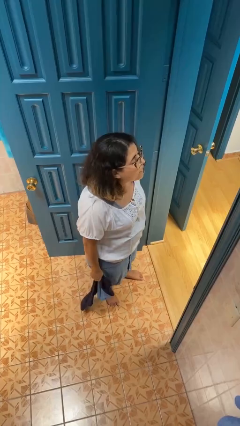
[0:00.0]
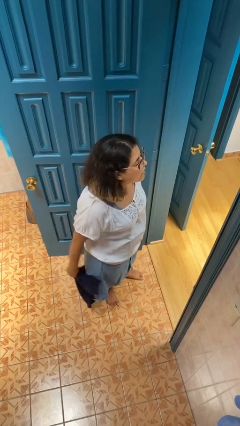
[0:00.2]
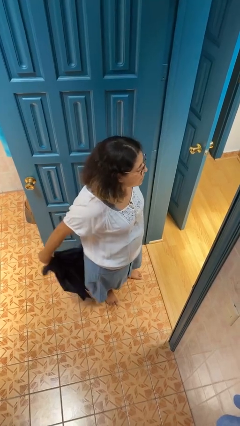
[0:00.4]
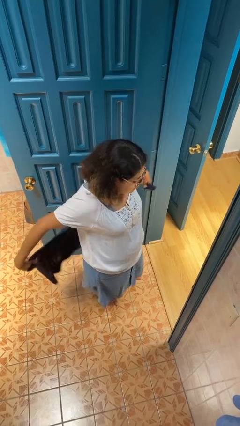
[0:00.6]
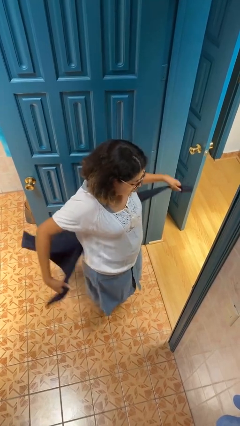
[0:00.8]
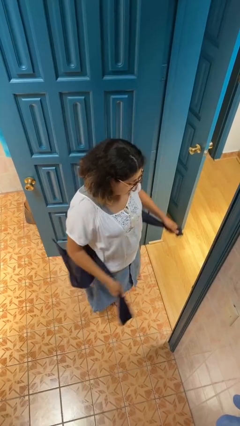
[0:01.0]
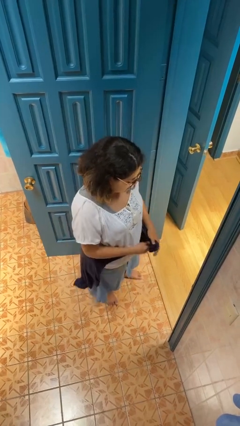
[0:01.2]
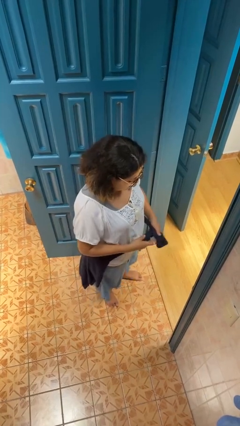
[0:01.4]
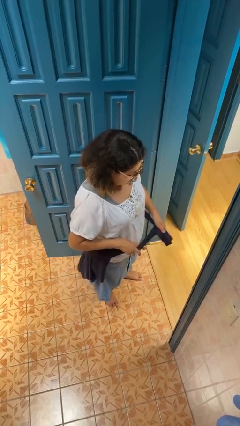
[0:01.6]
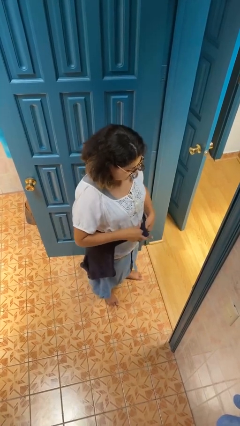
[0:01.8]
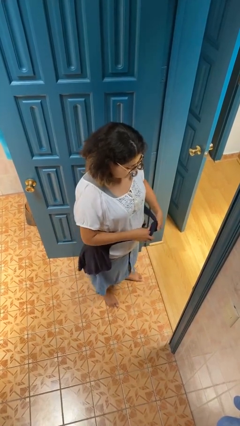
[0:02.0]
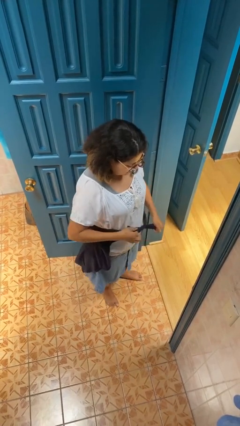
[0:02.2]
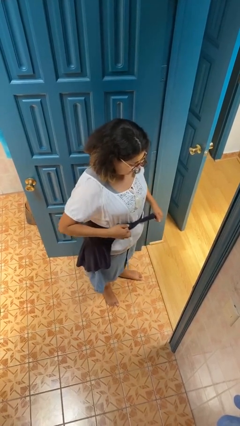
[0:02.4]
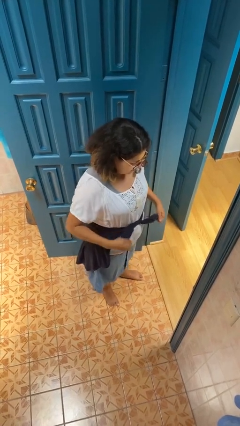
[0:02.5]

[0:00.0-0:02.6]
person ties jacket around waist

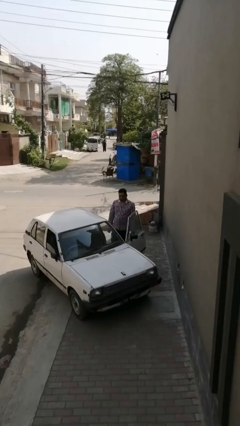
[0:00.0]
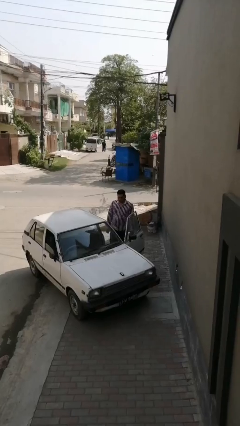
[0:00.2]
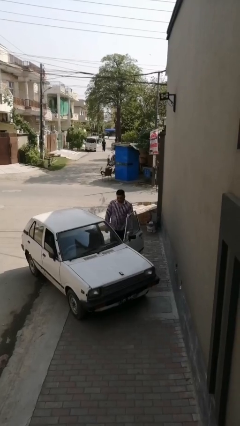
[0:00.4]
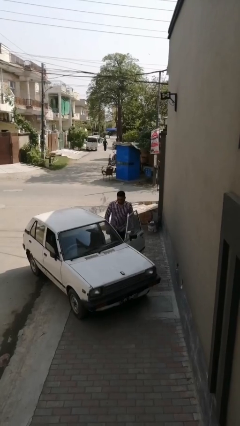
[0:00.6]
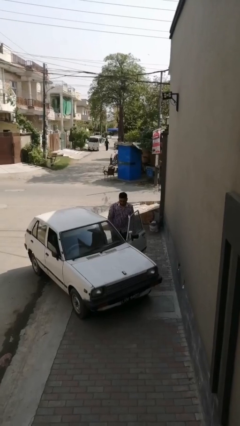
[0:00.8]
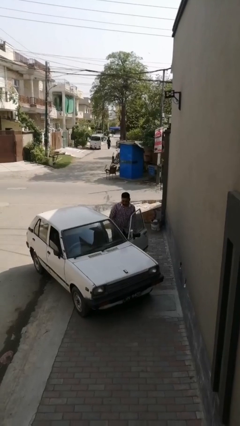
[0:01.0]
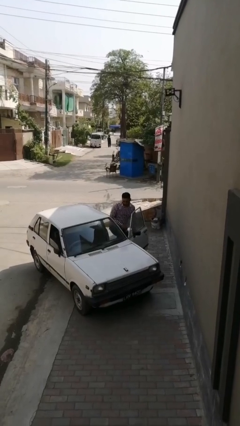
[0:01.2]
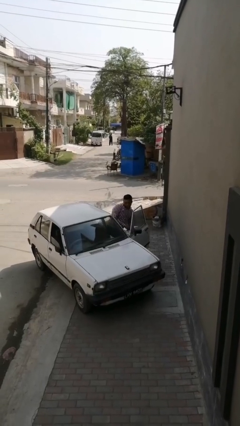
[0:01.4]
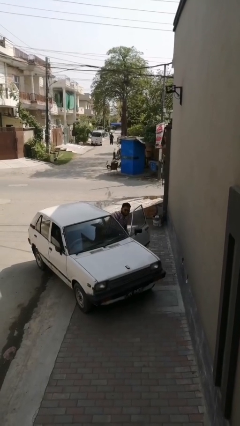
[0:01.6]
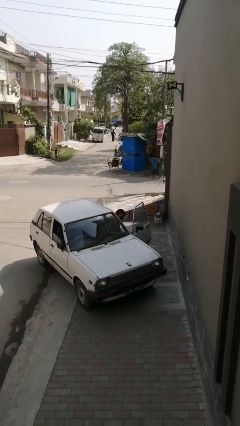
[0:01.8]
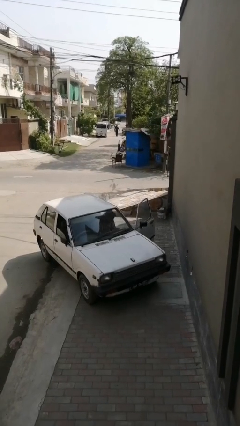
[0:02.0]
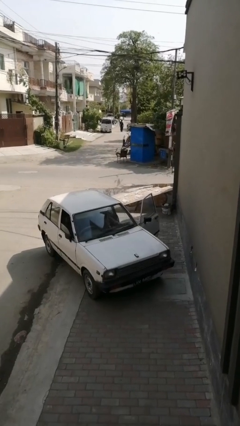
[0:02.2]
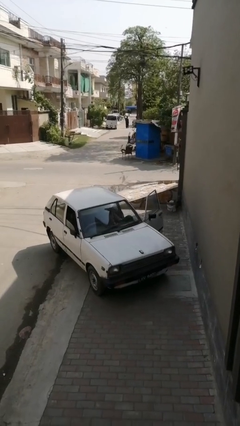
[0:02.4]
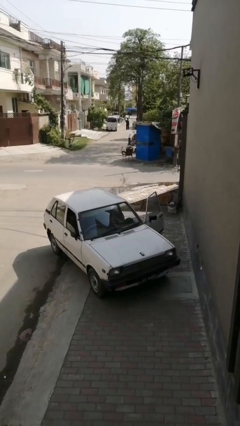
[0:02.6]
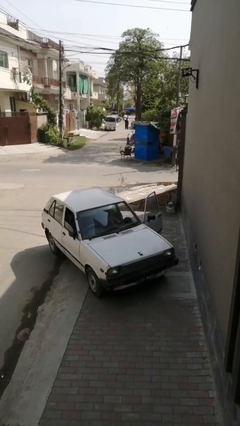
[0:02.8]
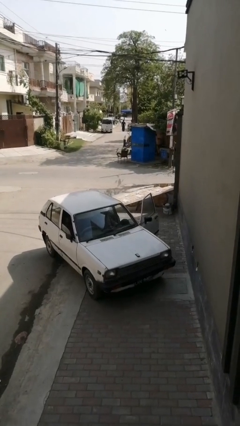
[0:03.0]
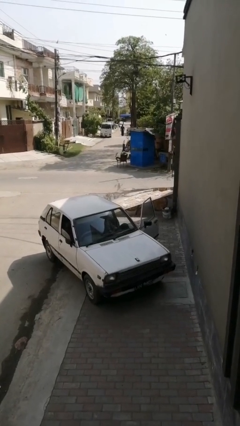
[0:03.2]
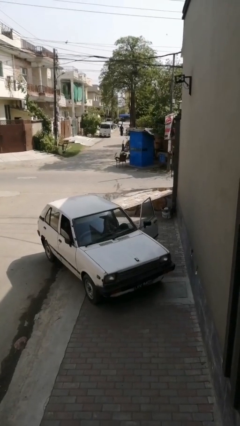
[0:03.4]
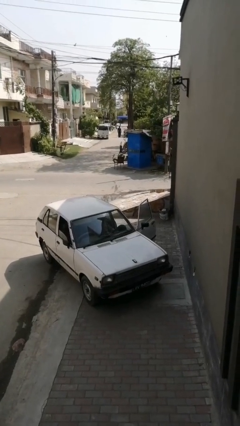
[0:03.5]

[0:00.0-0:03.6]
person enters car

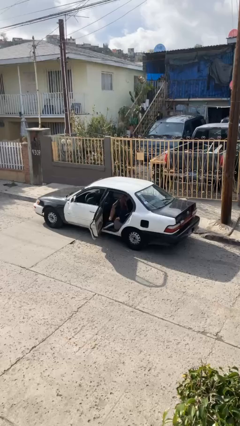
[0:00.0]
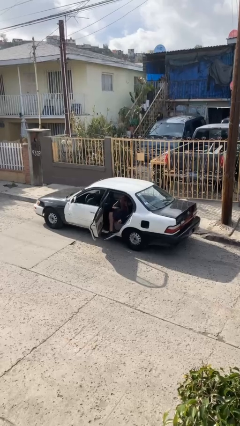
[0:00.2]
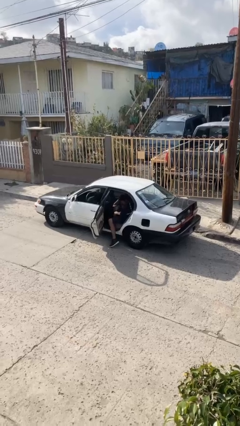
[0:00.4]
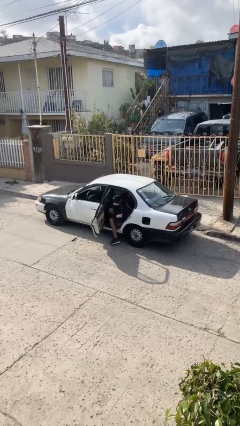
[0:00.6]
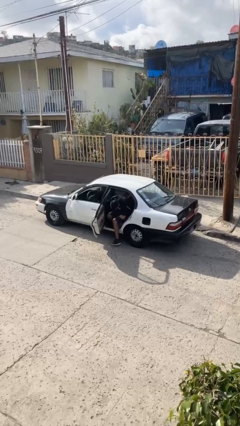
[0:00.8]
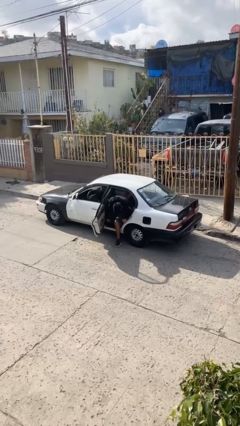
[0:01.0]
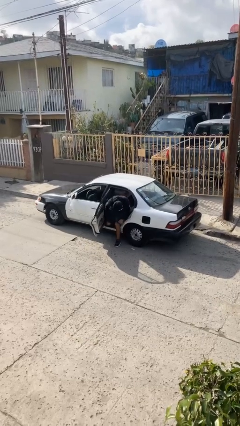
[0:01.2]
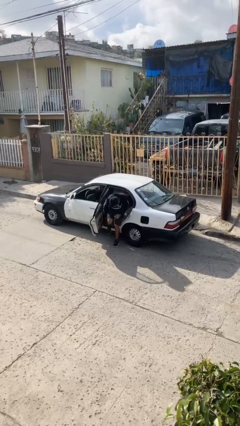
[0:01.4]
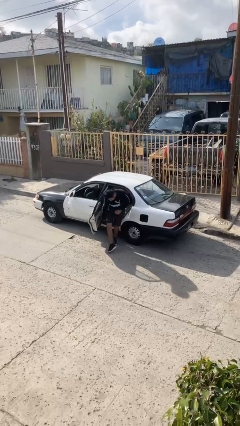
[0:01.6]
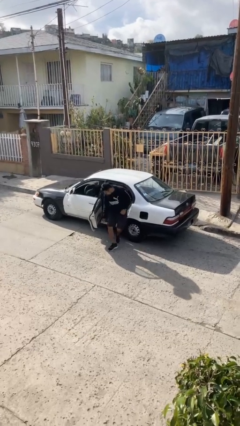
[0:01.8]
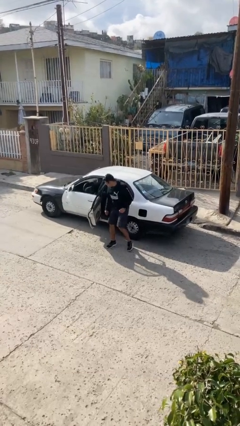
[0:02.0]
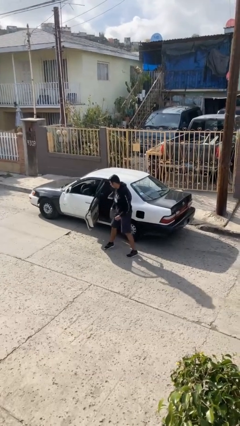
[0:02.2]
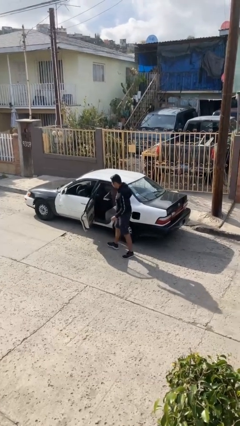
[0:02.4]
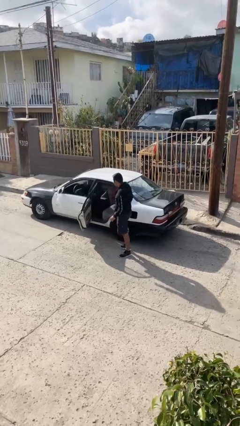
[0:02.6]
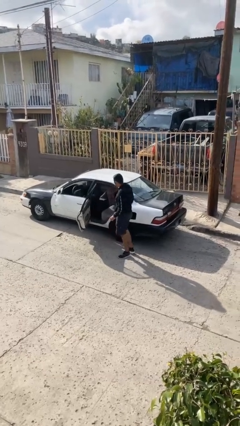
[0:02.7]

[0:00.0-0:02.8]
person exits car

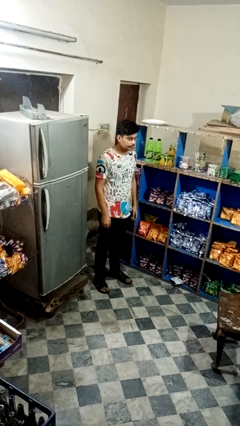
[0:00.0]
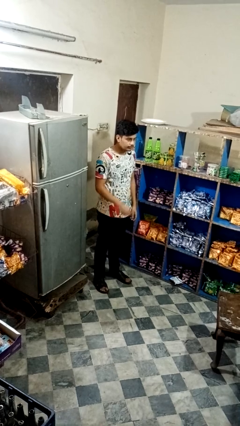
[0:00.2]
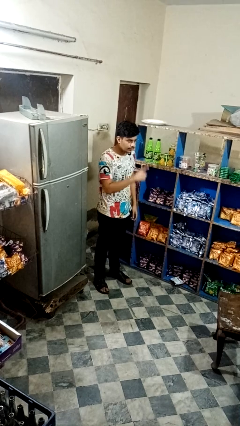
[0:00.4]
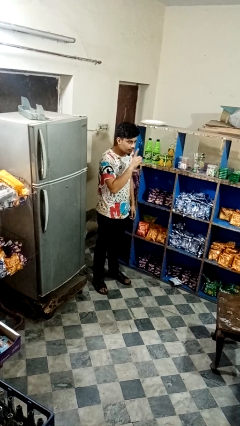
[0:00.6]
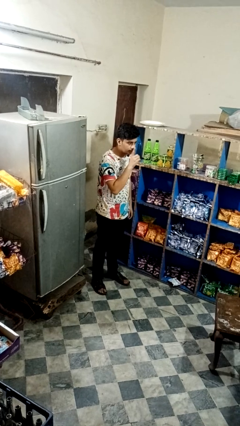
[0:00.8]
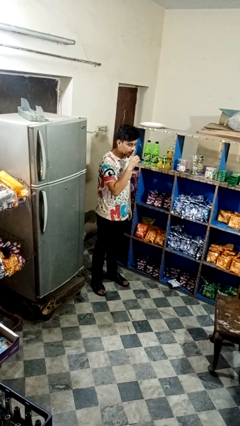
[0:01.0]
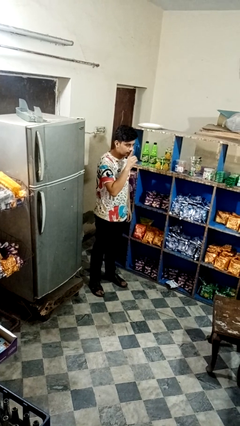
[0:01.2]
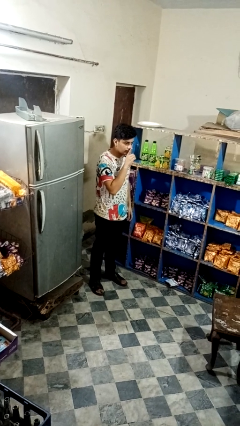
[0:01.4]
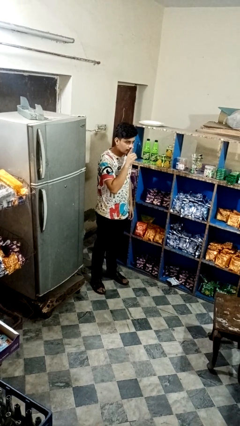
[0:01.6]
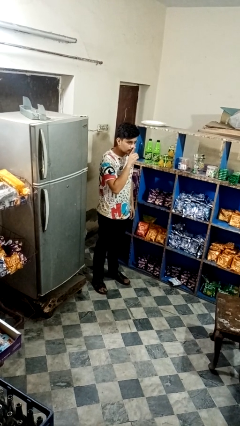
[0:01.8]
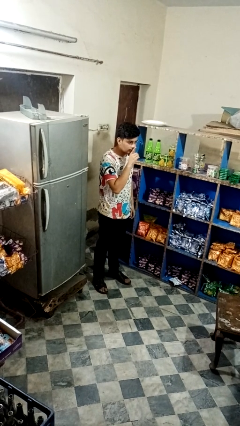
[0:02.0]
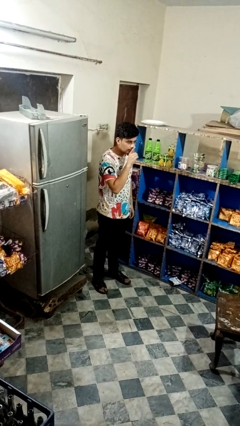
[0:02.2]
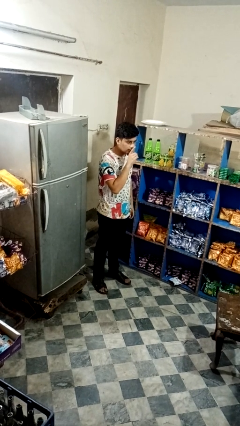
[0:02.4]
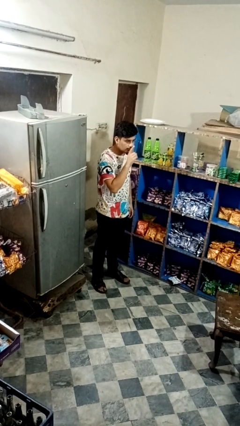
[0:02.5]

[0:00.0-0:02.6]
person gestures be quiet

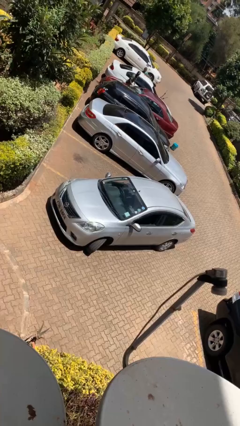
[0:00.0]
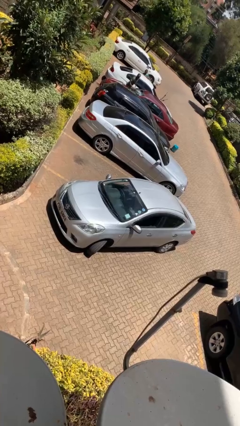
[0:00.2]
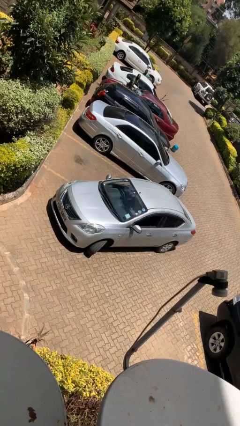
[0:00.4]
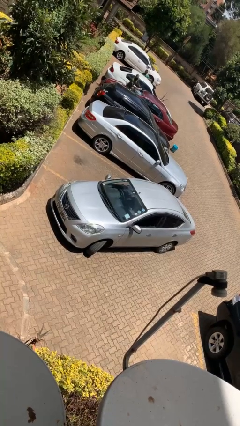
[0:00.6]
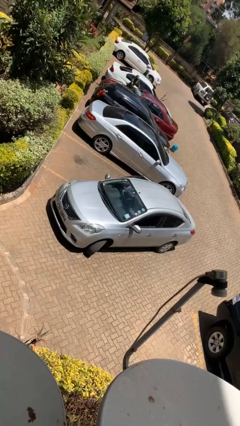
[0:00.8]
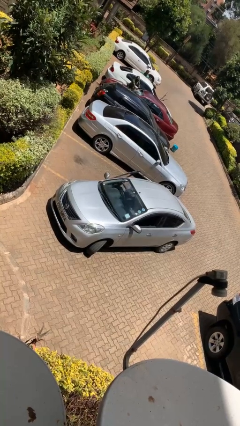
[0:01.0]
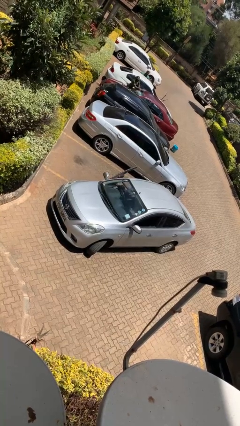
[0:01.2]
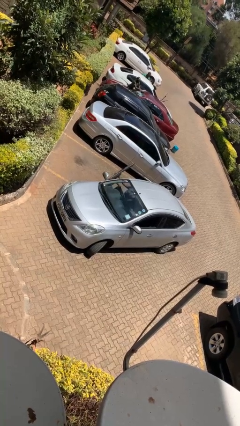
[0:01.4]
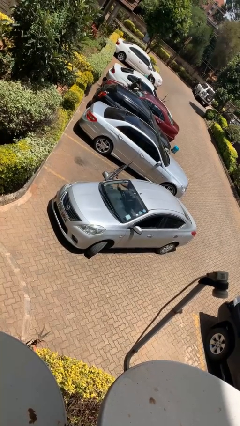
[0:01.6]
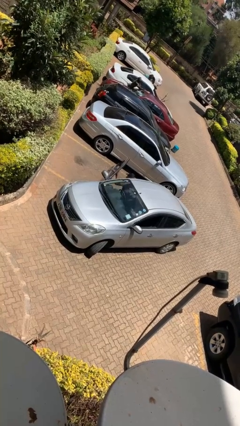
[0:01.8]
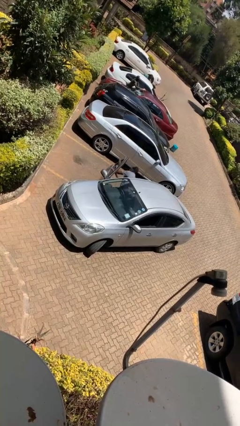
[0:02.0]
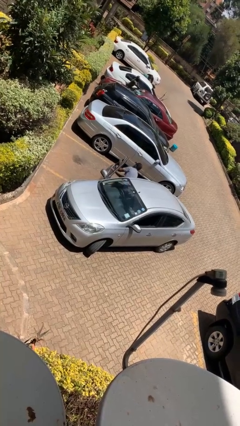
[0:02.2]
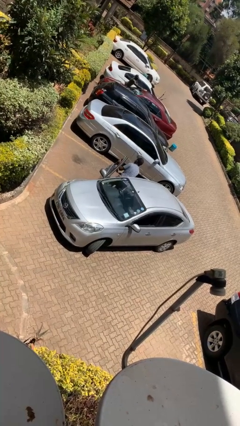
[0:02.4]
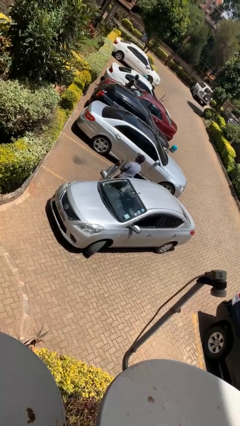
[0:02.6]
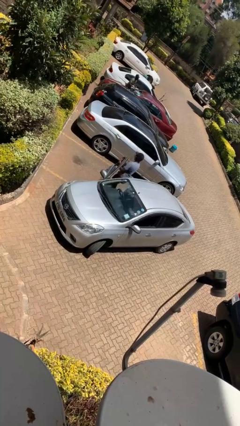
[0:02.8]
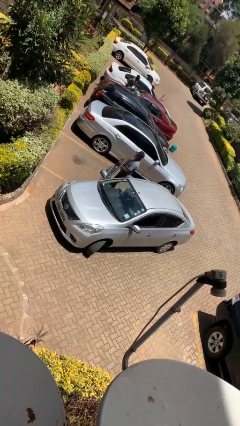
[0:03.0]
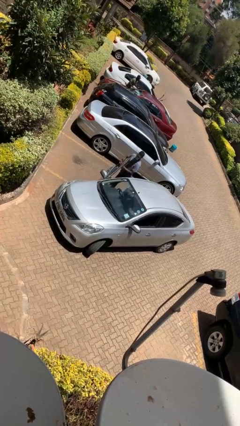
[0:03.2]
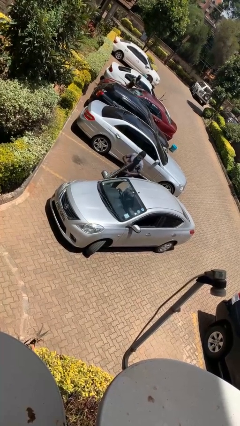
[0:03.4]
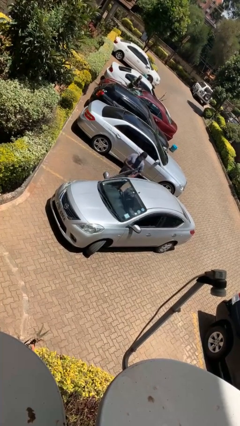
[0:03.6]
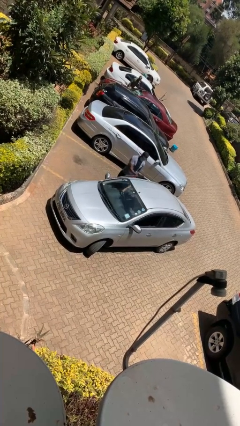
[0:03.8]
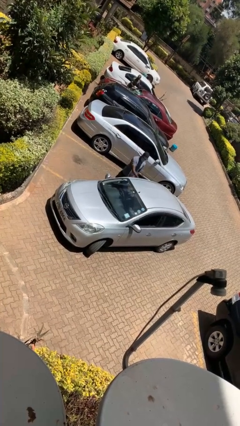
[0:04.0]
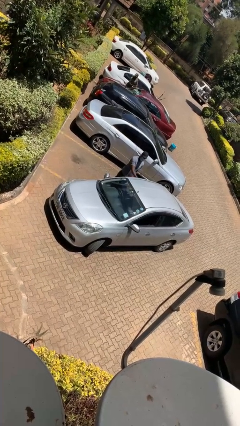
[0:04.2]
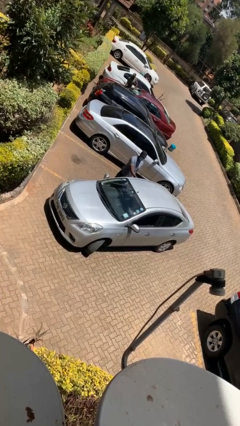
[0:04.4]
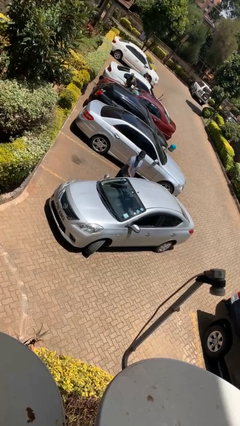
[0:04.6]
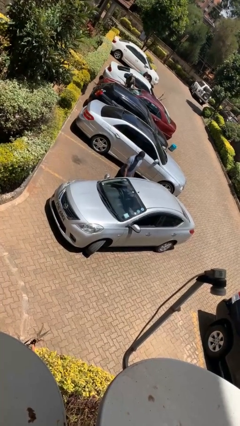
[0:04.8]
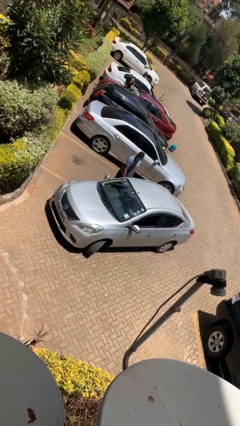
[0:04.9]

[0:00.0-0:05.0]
car drops off person

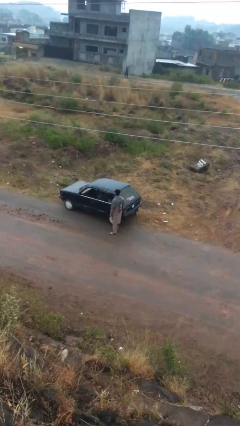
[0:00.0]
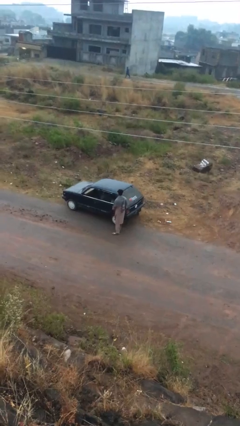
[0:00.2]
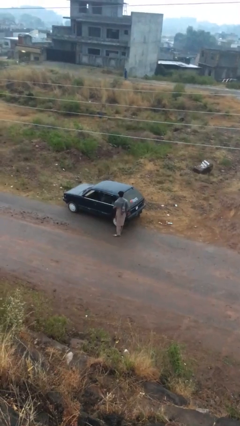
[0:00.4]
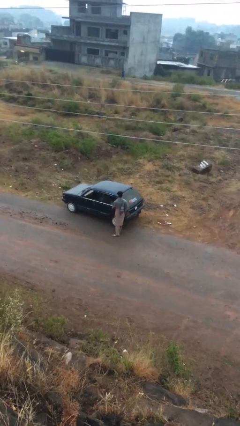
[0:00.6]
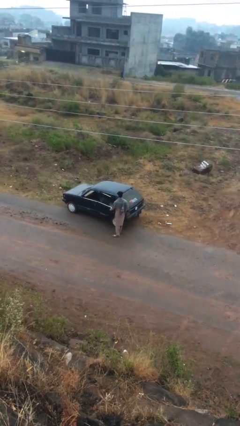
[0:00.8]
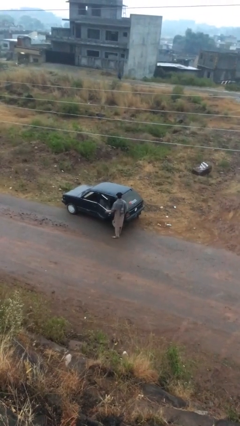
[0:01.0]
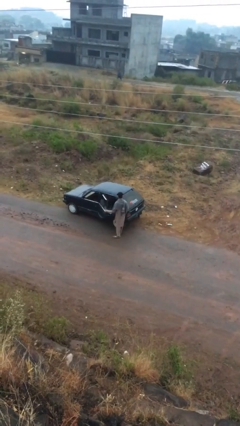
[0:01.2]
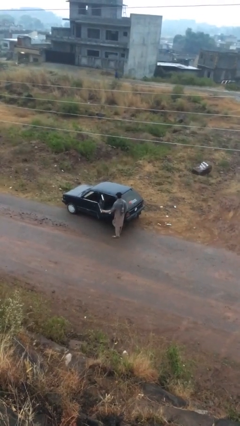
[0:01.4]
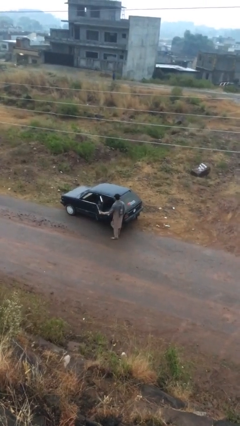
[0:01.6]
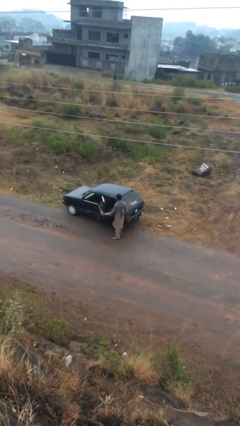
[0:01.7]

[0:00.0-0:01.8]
person opens car door
